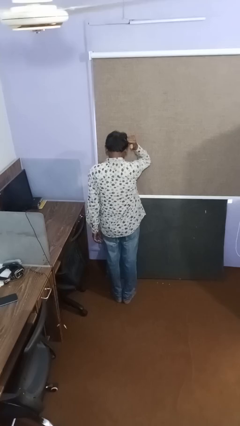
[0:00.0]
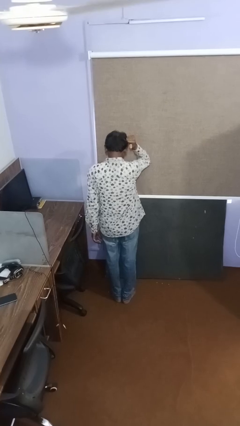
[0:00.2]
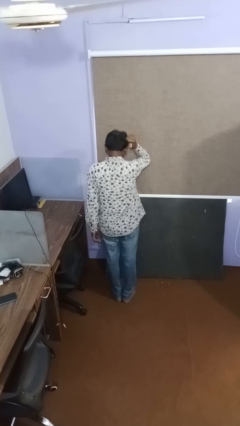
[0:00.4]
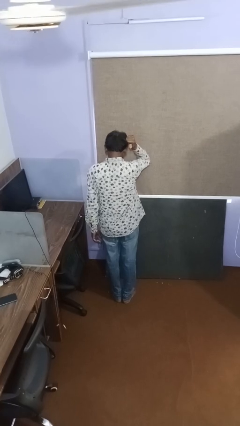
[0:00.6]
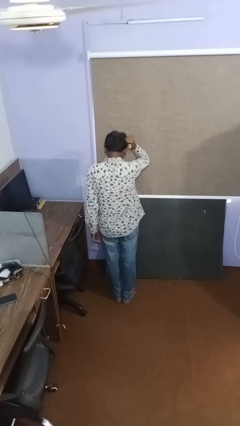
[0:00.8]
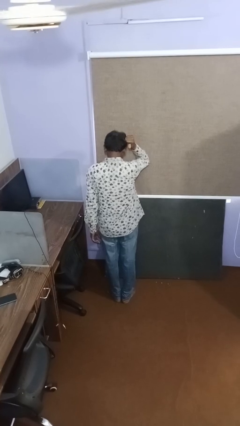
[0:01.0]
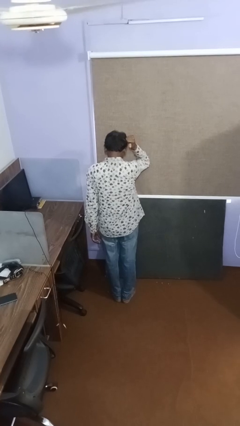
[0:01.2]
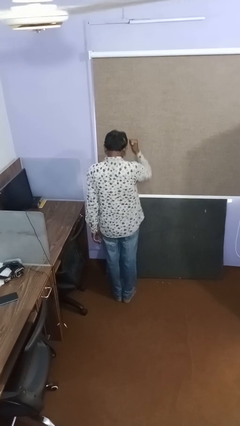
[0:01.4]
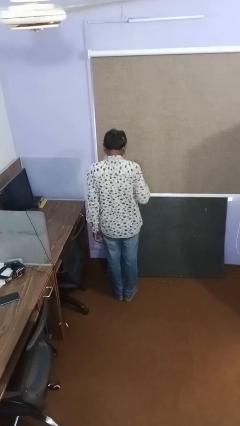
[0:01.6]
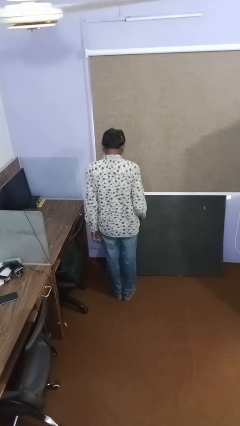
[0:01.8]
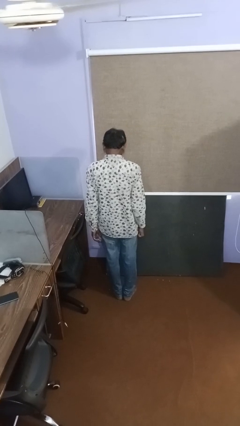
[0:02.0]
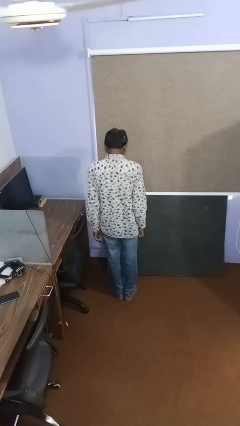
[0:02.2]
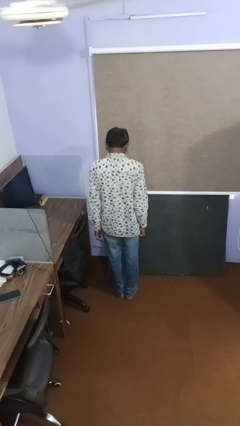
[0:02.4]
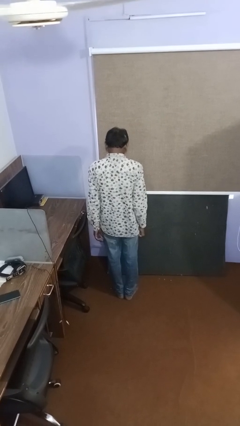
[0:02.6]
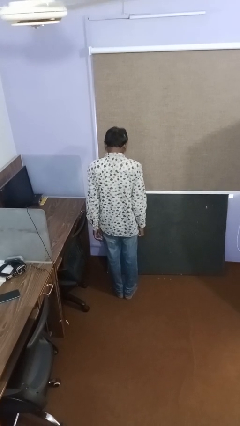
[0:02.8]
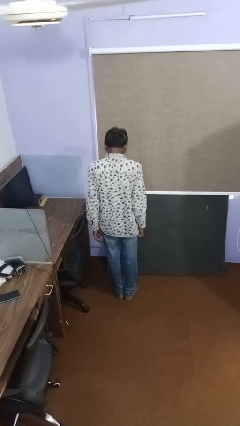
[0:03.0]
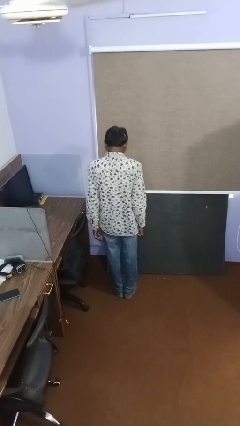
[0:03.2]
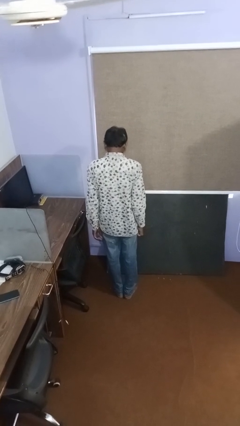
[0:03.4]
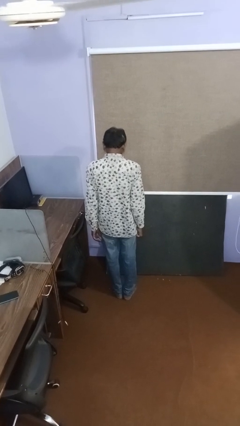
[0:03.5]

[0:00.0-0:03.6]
person gestures thumbs down

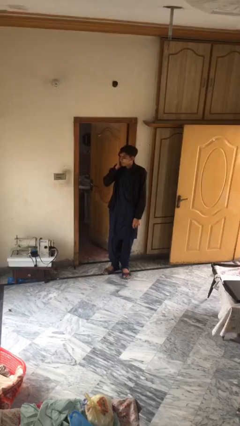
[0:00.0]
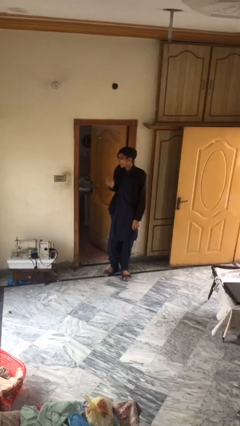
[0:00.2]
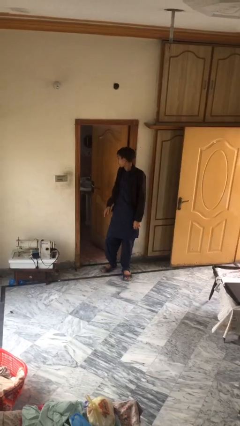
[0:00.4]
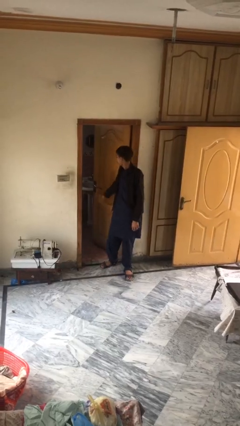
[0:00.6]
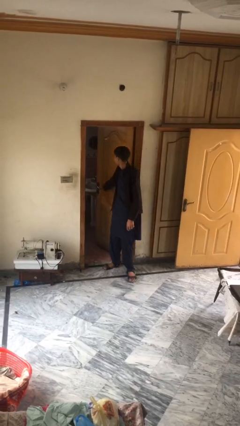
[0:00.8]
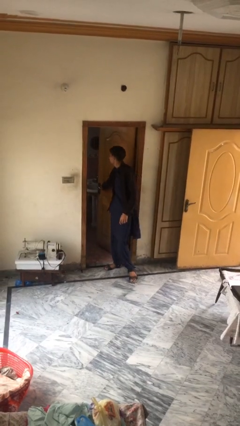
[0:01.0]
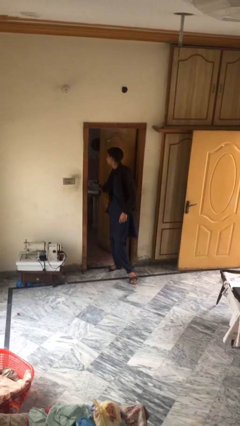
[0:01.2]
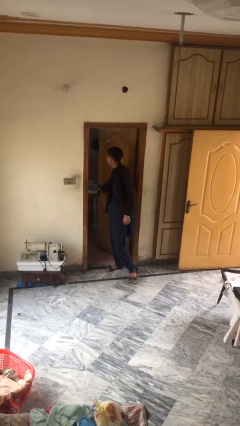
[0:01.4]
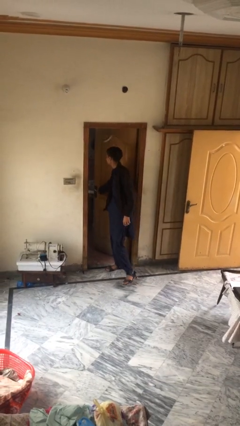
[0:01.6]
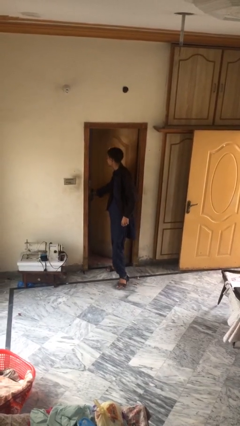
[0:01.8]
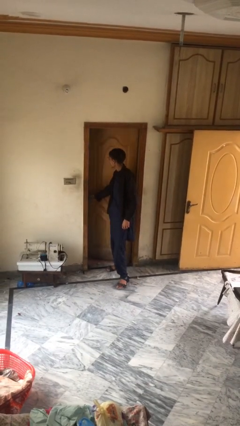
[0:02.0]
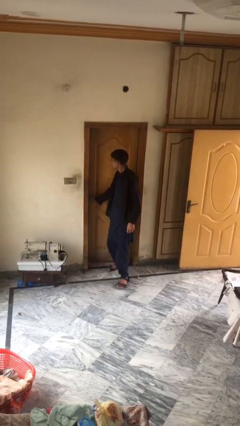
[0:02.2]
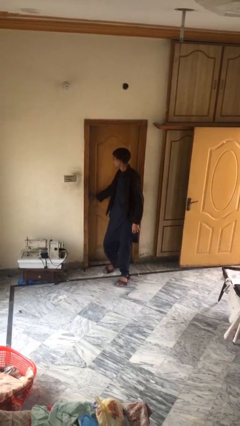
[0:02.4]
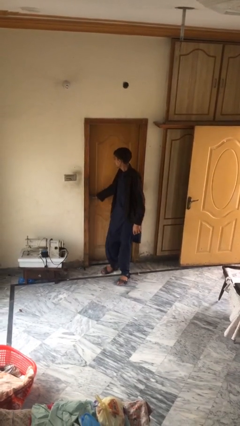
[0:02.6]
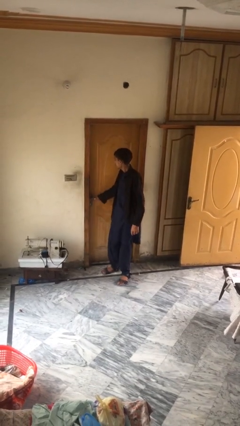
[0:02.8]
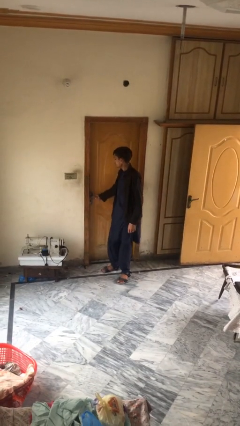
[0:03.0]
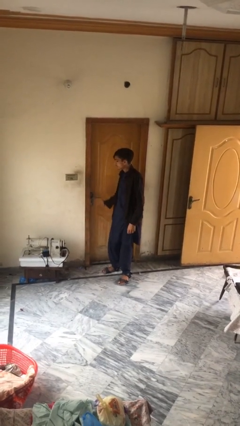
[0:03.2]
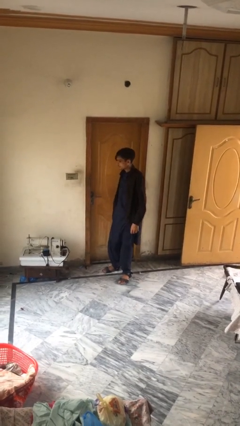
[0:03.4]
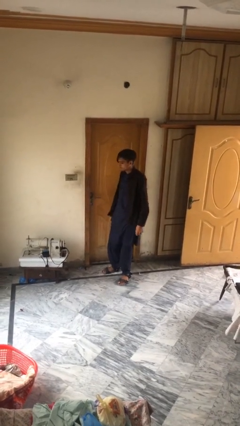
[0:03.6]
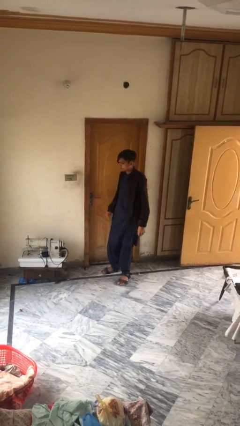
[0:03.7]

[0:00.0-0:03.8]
person closes facility door

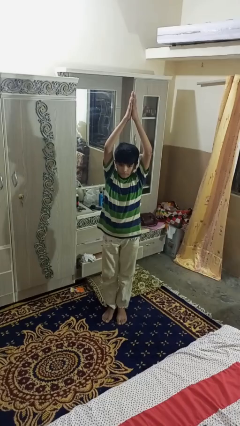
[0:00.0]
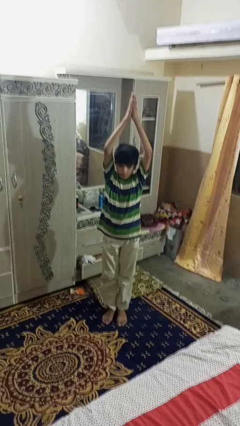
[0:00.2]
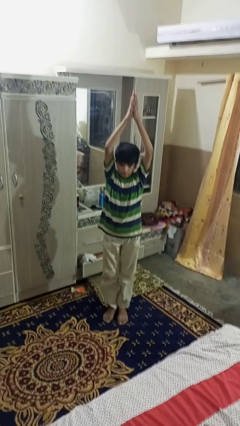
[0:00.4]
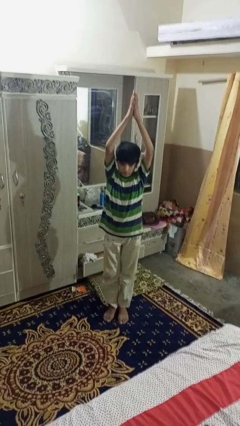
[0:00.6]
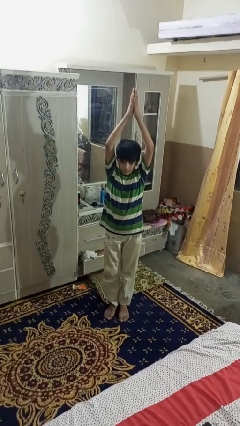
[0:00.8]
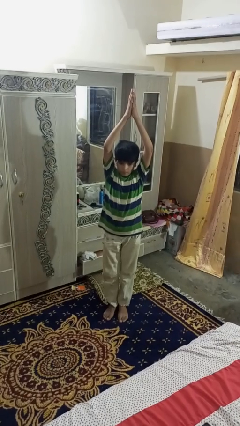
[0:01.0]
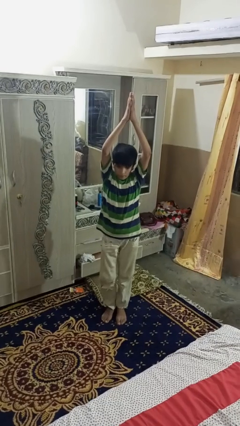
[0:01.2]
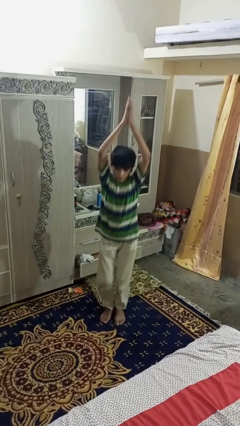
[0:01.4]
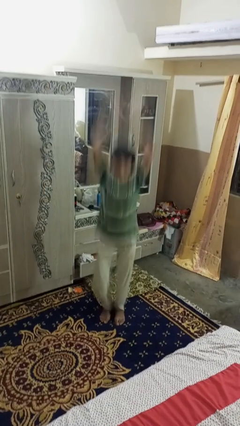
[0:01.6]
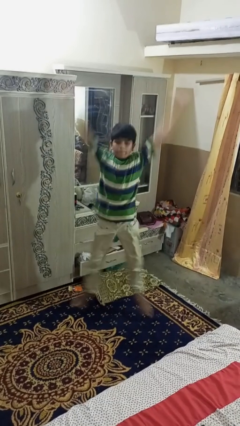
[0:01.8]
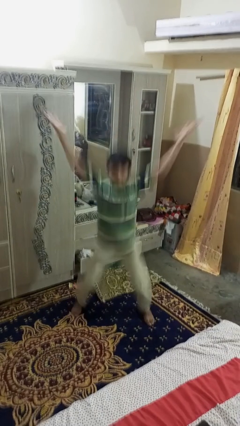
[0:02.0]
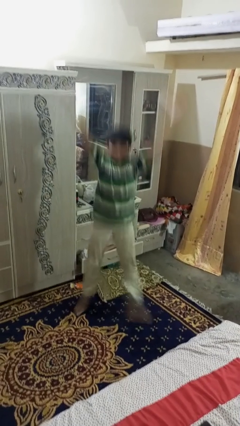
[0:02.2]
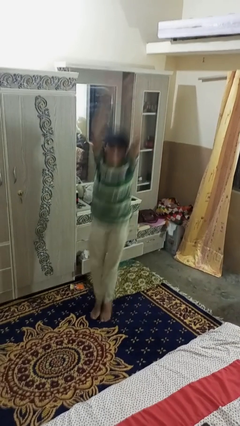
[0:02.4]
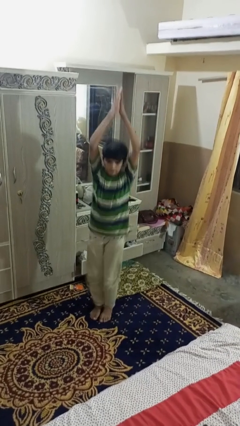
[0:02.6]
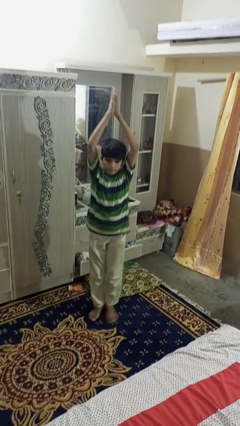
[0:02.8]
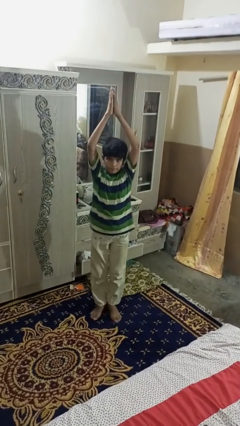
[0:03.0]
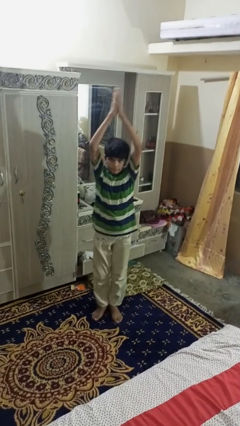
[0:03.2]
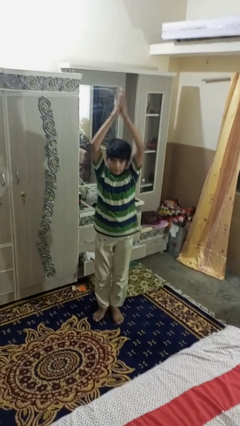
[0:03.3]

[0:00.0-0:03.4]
person exercises with jumping jacks

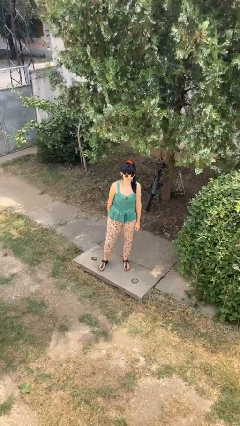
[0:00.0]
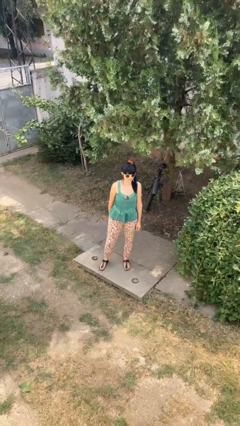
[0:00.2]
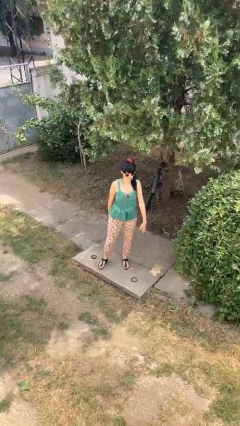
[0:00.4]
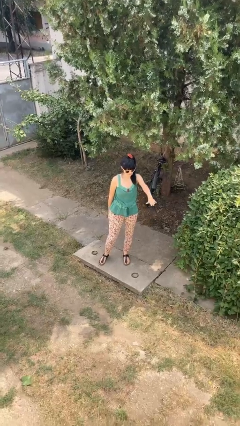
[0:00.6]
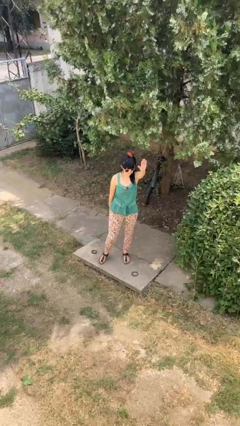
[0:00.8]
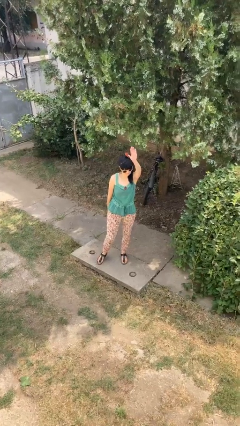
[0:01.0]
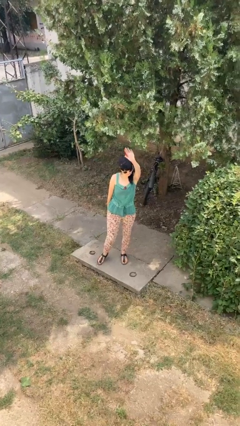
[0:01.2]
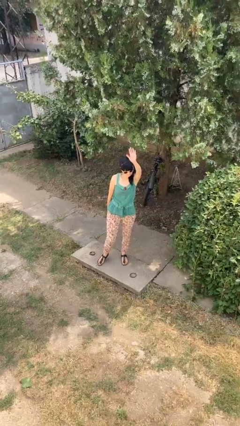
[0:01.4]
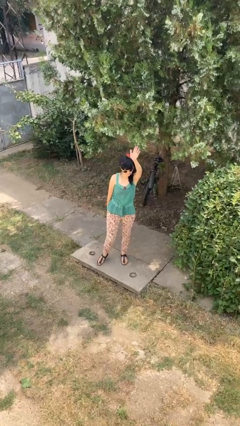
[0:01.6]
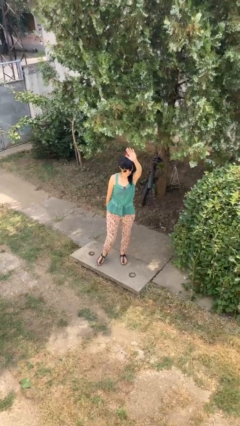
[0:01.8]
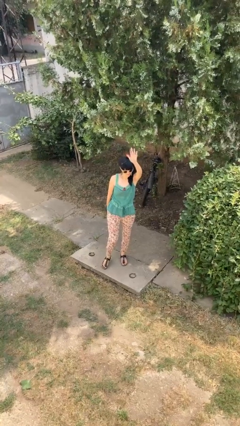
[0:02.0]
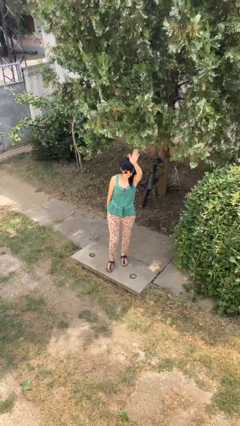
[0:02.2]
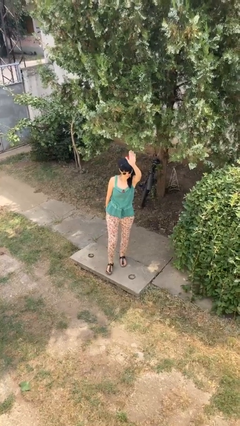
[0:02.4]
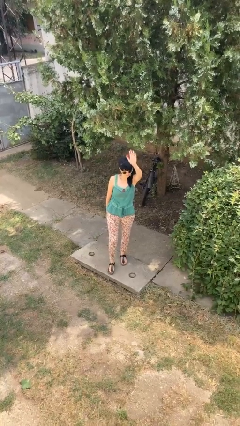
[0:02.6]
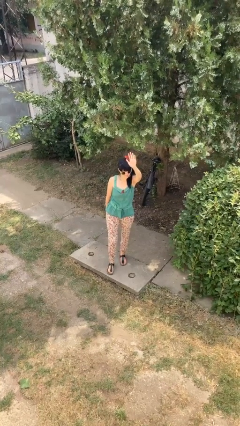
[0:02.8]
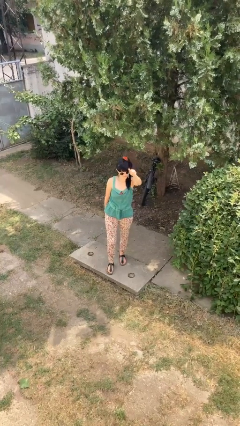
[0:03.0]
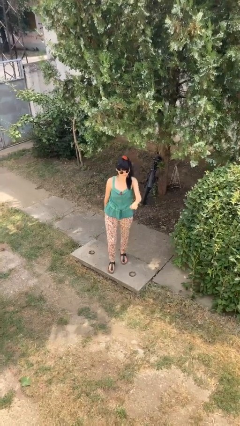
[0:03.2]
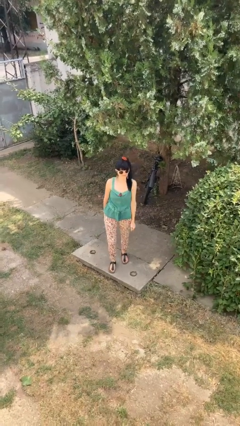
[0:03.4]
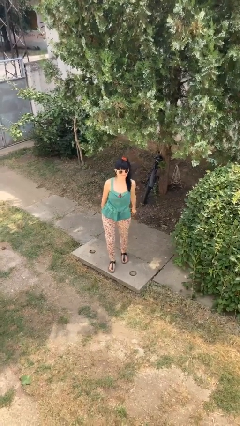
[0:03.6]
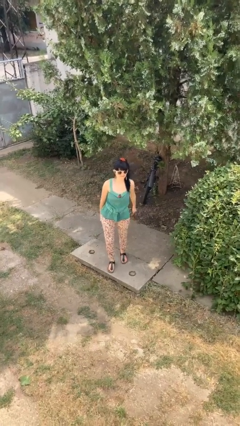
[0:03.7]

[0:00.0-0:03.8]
person waves at person

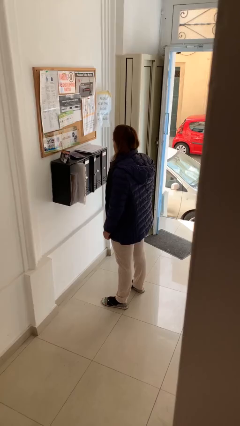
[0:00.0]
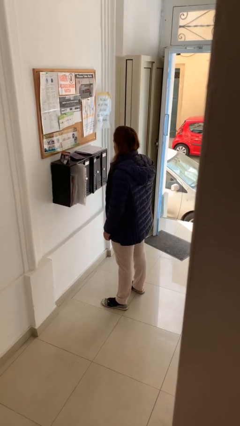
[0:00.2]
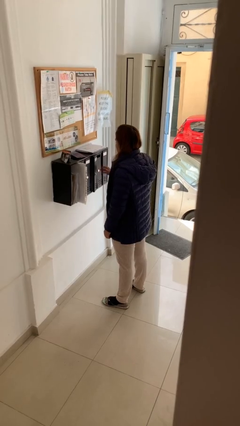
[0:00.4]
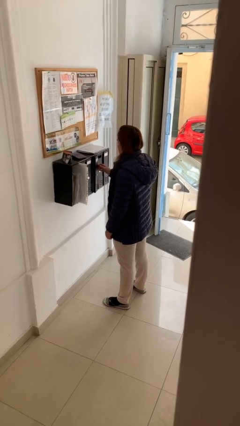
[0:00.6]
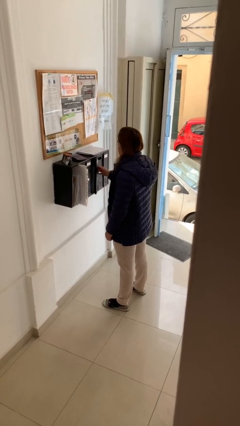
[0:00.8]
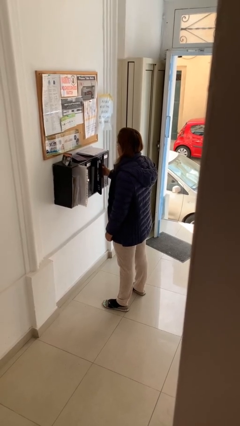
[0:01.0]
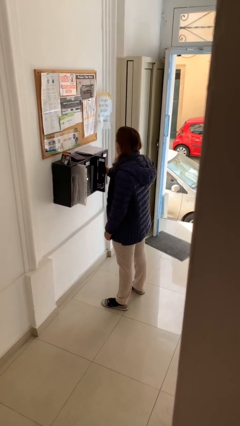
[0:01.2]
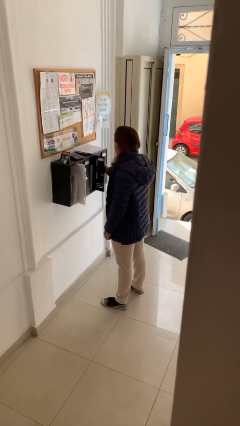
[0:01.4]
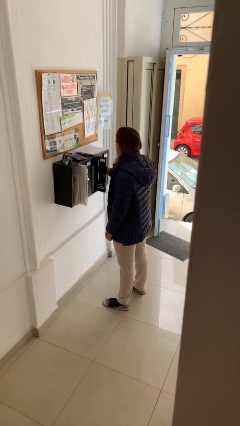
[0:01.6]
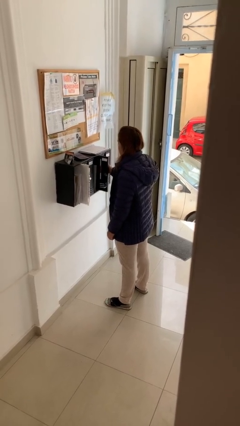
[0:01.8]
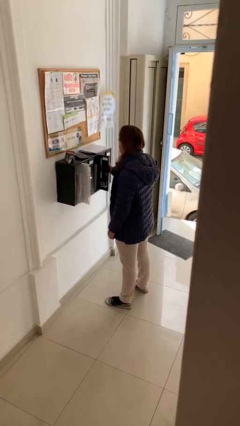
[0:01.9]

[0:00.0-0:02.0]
person opens mailbox

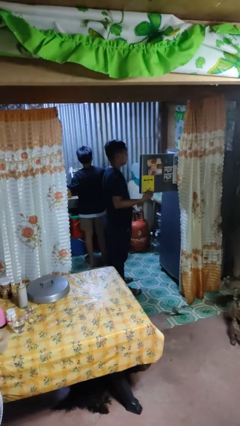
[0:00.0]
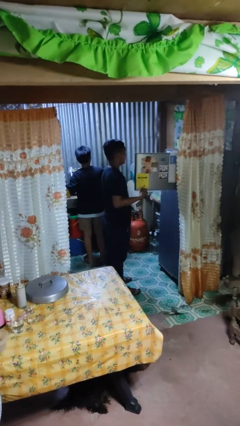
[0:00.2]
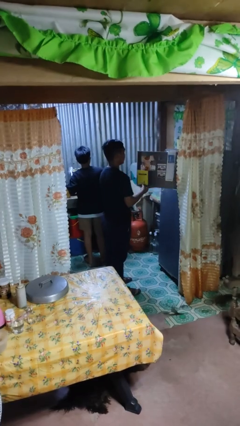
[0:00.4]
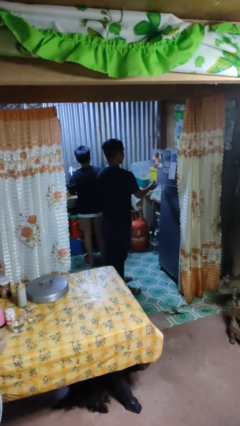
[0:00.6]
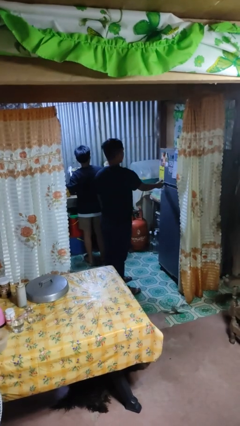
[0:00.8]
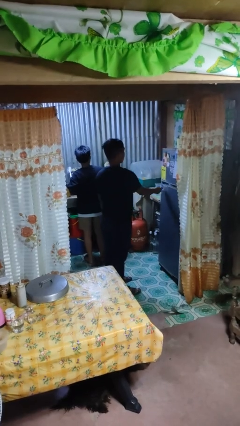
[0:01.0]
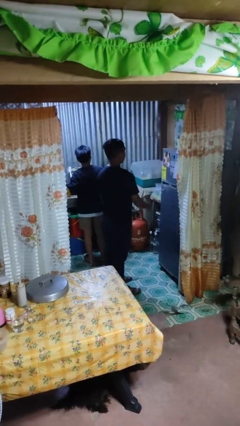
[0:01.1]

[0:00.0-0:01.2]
person closes refrigerator
